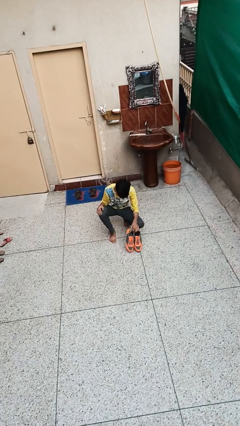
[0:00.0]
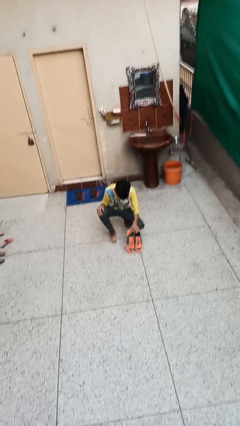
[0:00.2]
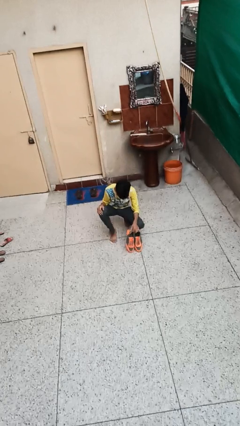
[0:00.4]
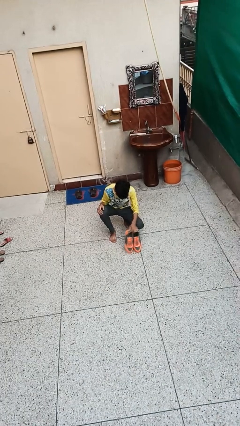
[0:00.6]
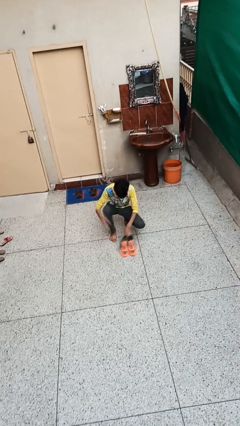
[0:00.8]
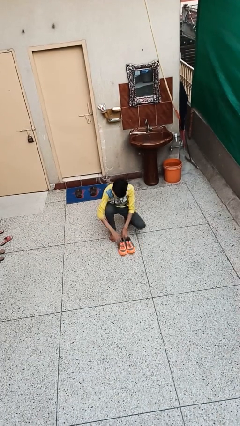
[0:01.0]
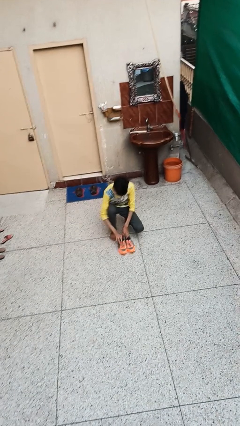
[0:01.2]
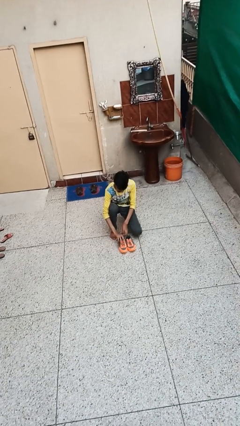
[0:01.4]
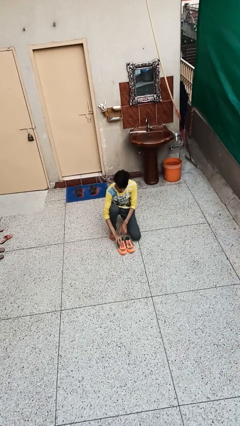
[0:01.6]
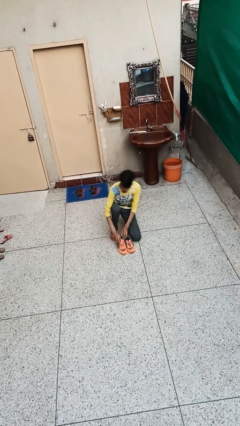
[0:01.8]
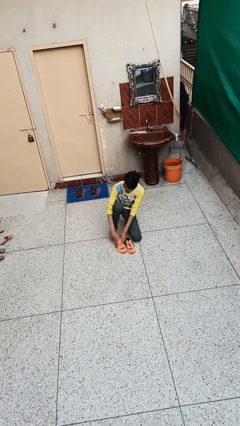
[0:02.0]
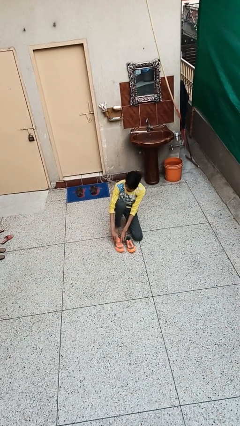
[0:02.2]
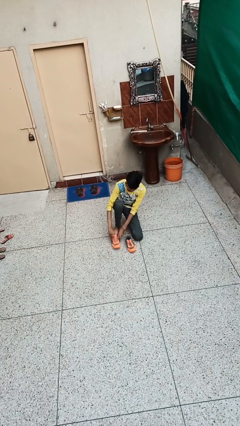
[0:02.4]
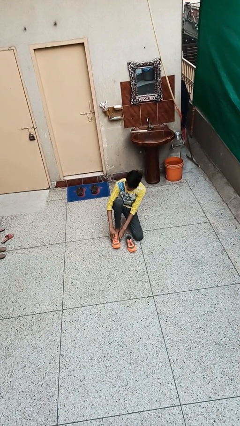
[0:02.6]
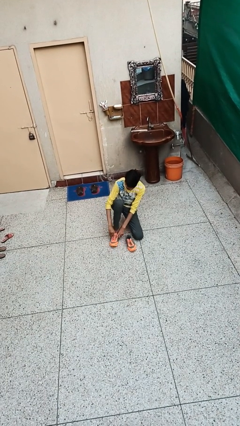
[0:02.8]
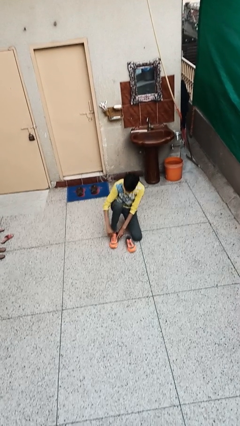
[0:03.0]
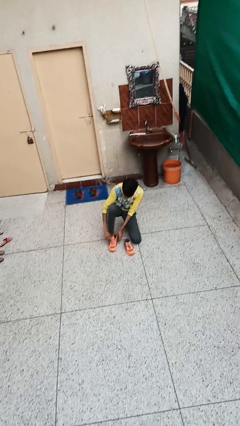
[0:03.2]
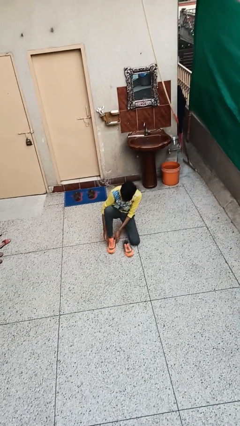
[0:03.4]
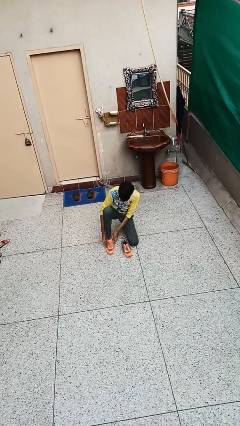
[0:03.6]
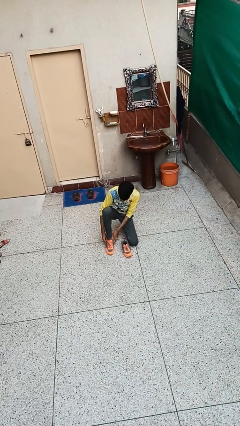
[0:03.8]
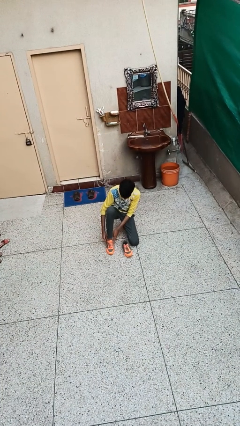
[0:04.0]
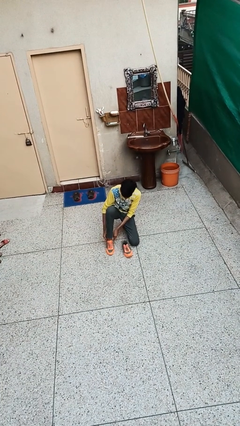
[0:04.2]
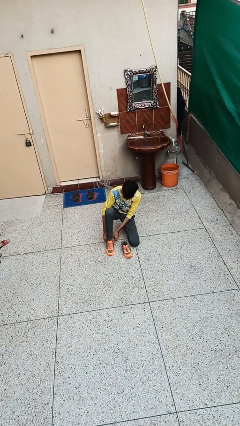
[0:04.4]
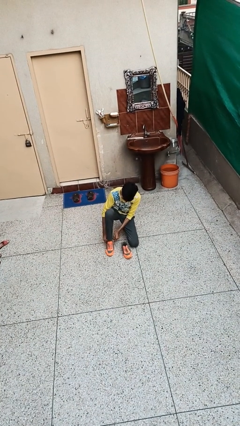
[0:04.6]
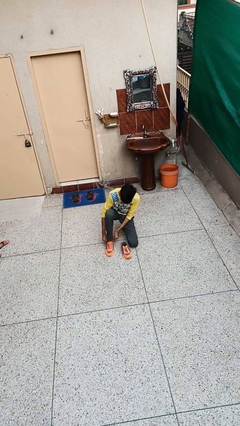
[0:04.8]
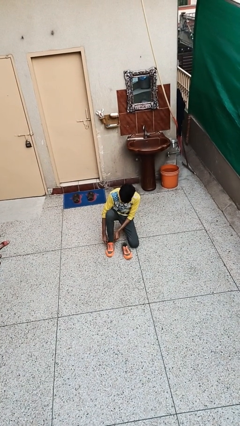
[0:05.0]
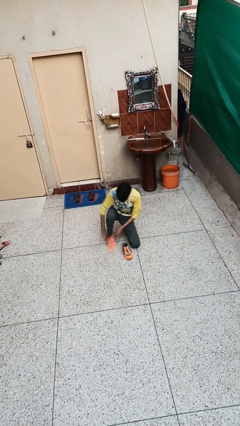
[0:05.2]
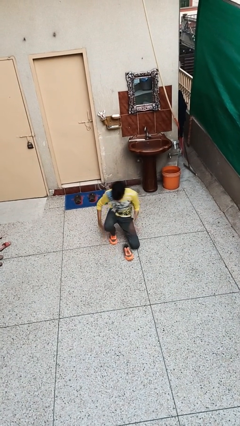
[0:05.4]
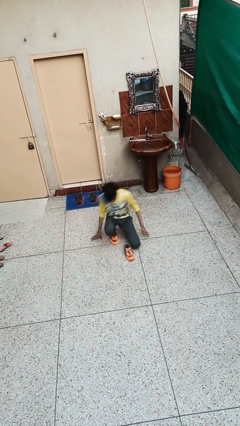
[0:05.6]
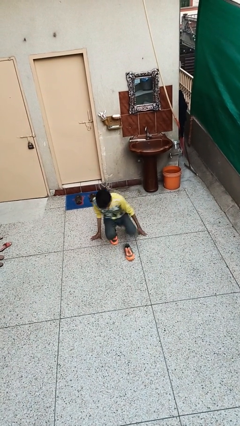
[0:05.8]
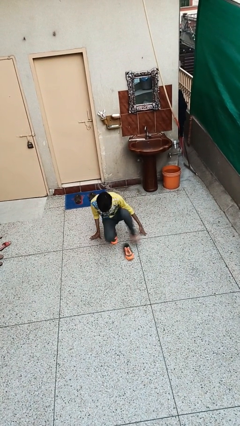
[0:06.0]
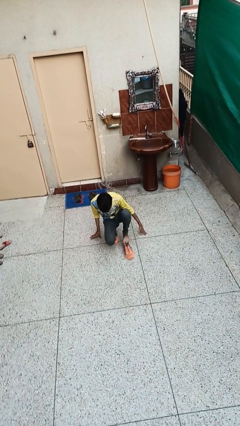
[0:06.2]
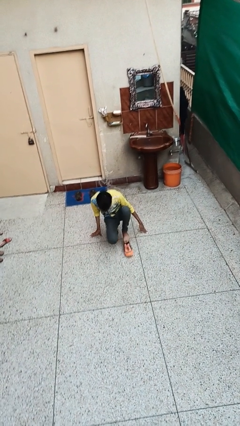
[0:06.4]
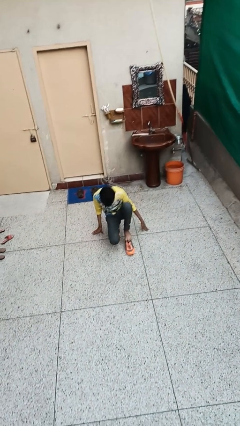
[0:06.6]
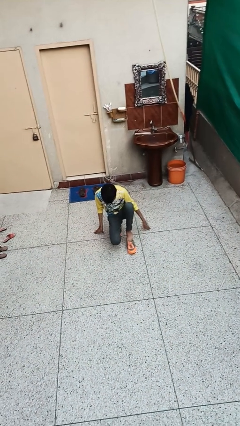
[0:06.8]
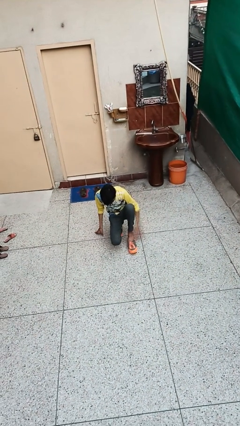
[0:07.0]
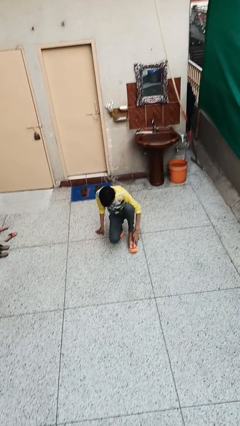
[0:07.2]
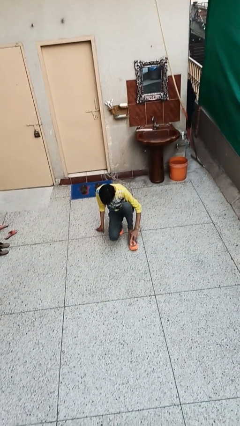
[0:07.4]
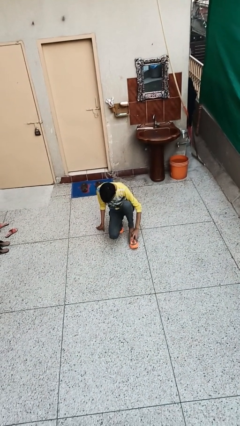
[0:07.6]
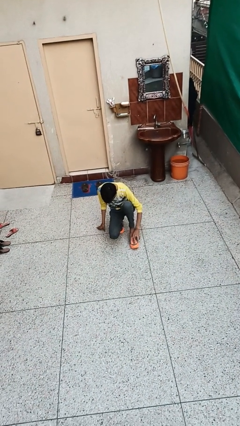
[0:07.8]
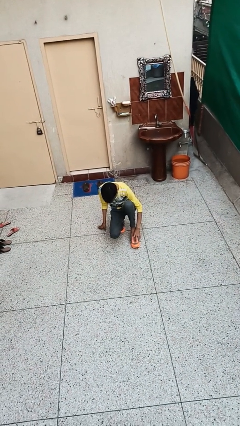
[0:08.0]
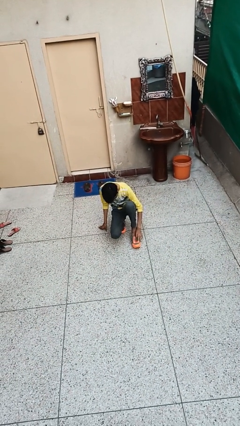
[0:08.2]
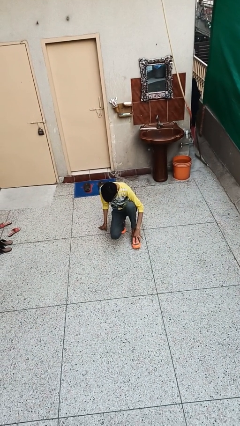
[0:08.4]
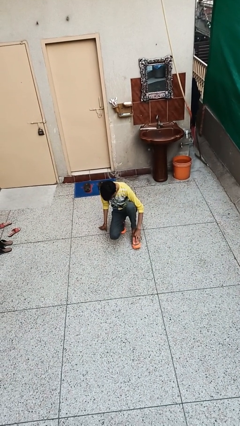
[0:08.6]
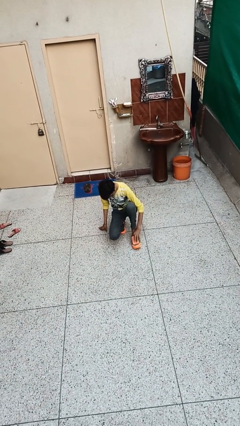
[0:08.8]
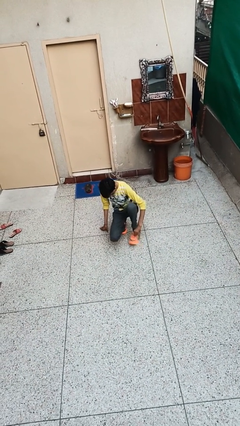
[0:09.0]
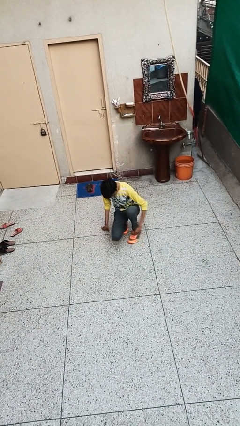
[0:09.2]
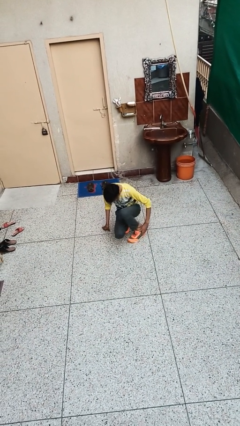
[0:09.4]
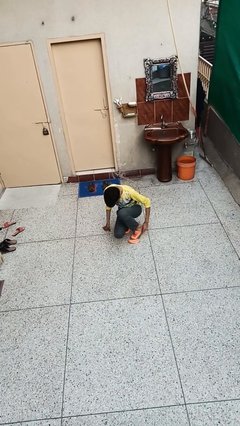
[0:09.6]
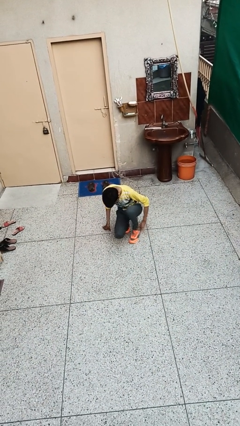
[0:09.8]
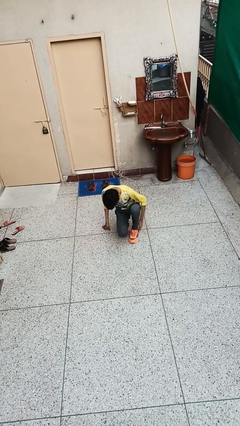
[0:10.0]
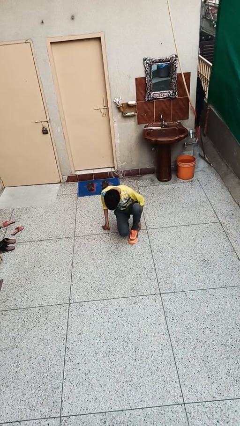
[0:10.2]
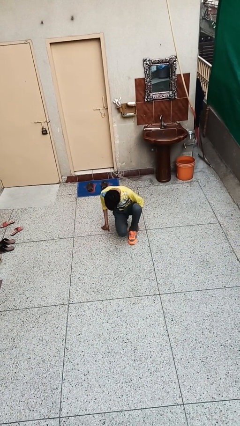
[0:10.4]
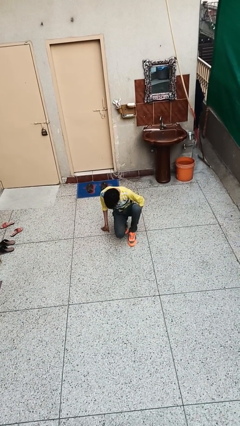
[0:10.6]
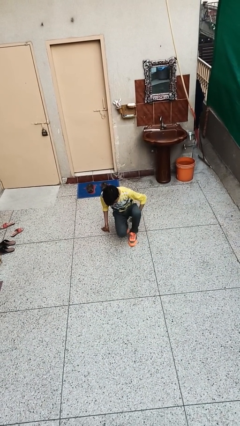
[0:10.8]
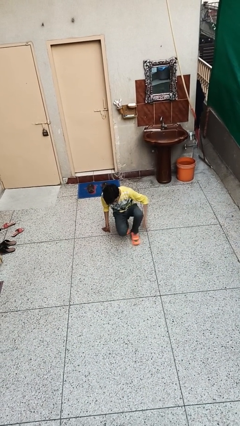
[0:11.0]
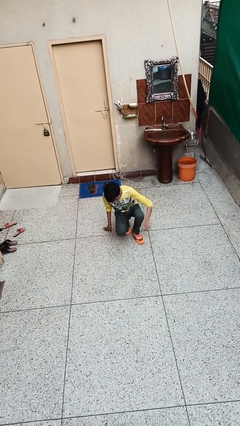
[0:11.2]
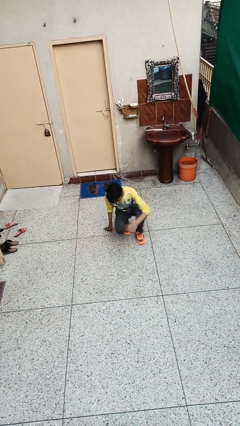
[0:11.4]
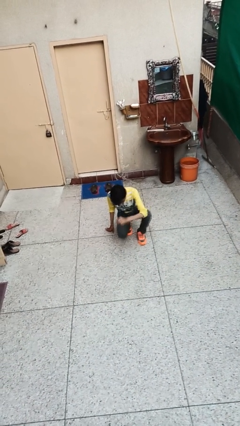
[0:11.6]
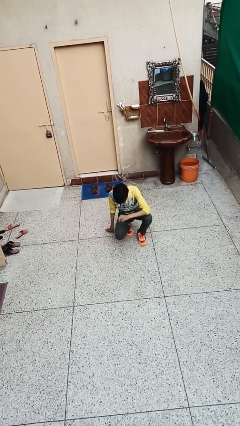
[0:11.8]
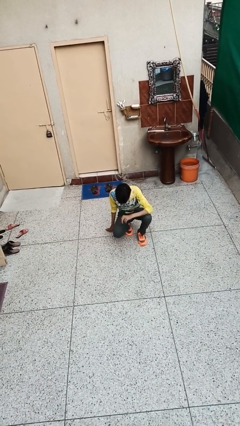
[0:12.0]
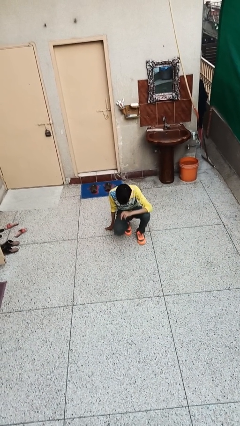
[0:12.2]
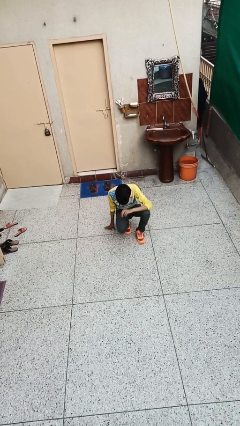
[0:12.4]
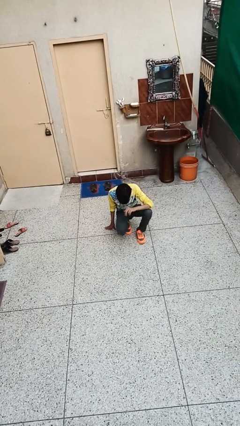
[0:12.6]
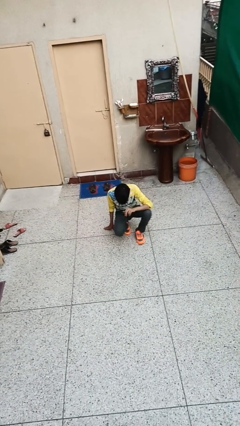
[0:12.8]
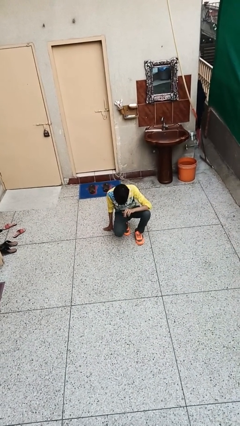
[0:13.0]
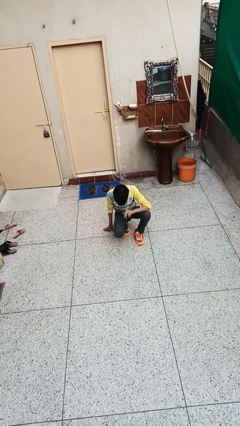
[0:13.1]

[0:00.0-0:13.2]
person puts on shoes

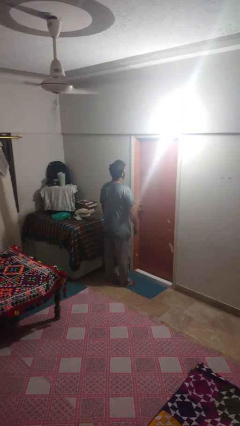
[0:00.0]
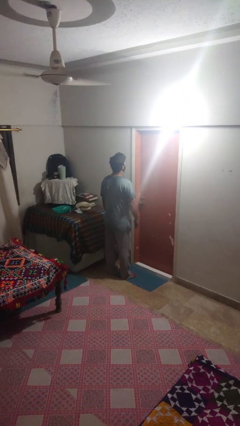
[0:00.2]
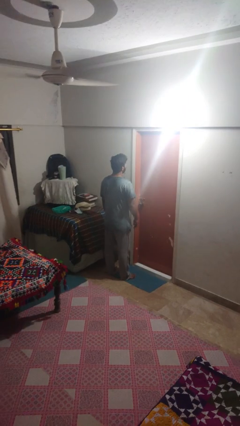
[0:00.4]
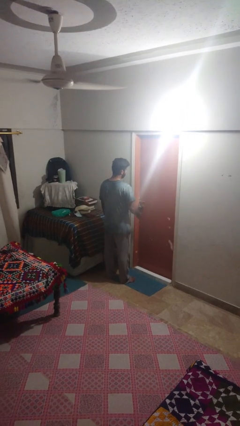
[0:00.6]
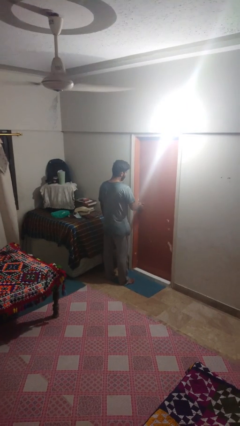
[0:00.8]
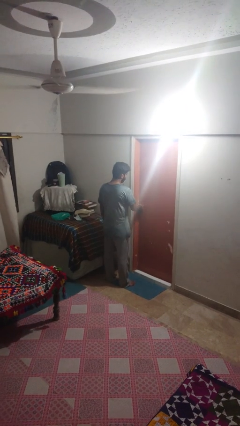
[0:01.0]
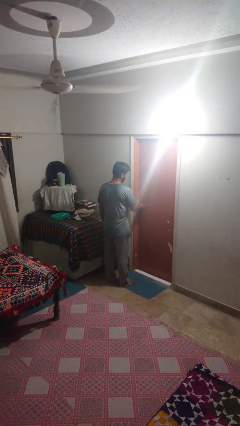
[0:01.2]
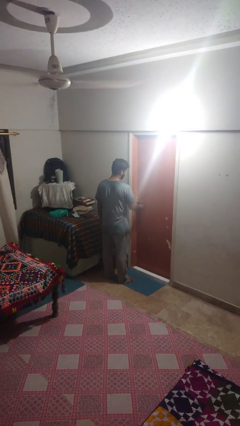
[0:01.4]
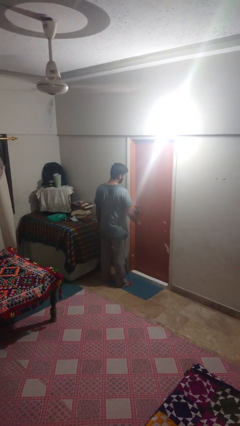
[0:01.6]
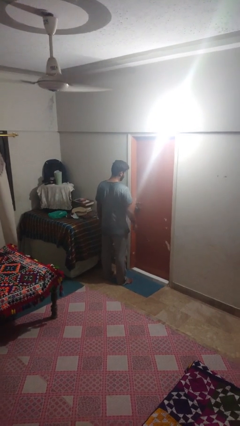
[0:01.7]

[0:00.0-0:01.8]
person unlocks door with keys

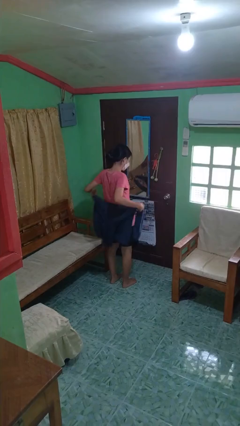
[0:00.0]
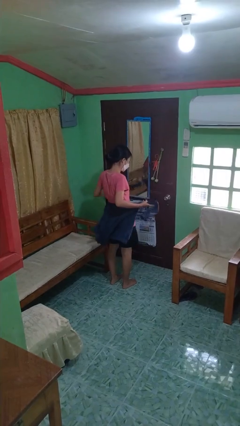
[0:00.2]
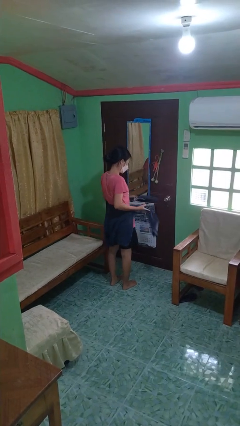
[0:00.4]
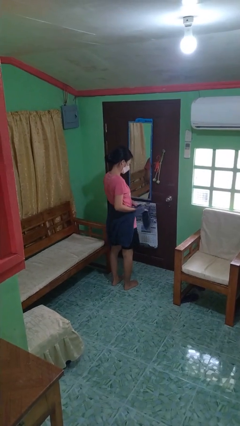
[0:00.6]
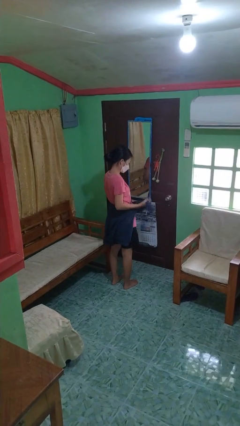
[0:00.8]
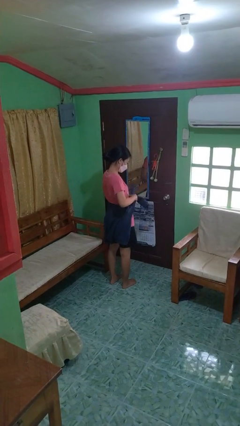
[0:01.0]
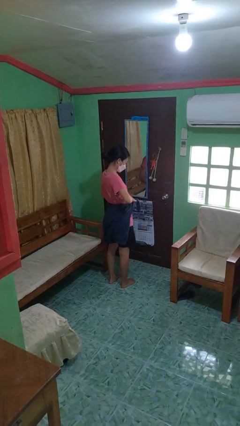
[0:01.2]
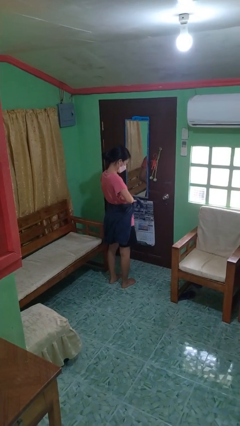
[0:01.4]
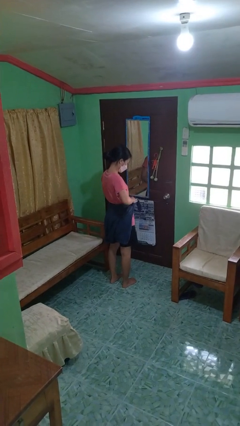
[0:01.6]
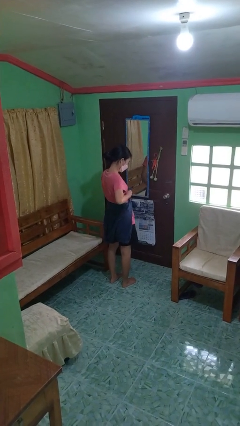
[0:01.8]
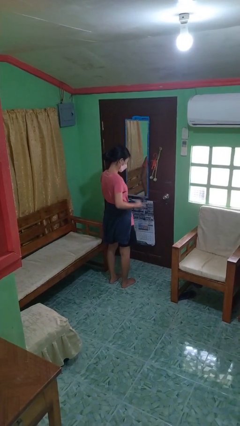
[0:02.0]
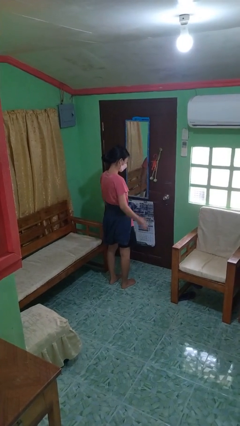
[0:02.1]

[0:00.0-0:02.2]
person ties jacket around waist

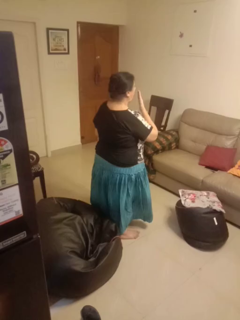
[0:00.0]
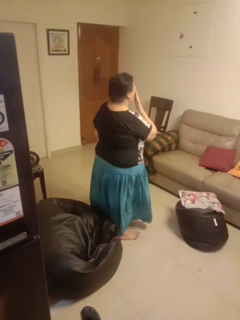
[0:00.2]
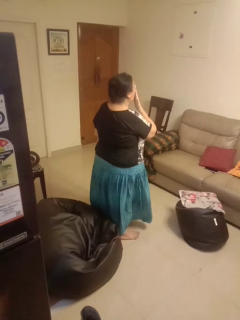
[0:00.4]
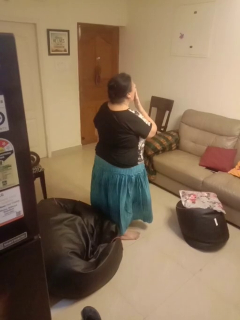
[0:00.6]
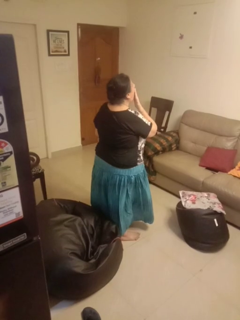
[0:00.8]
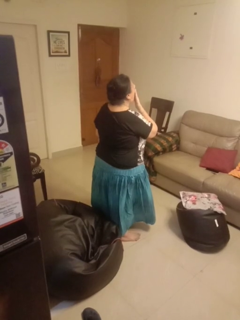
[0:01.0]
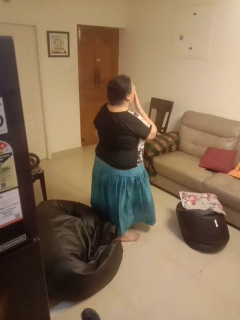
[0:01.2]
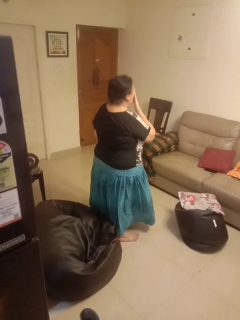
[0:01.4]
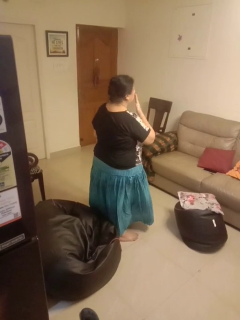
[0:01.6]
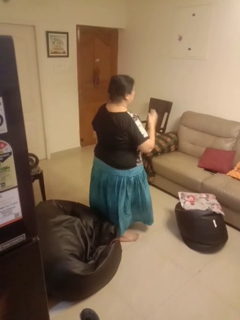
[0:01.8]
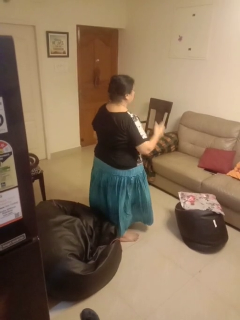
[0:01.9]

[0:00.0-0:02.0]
person yawns
